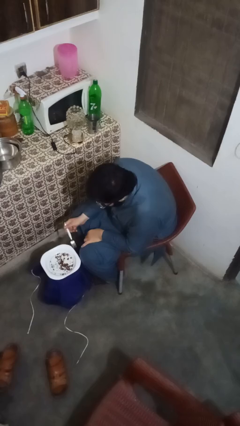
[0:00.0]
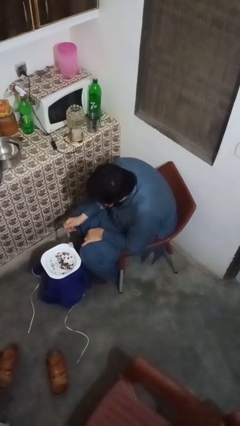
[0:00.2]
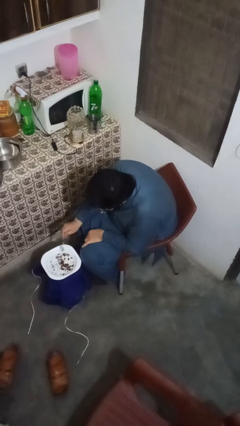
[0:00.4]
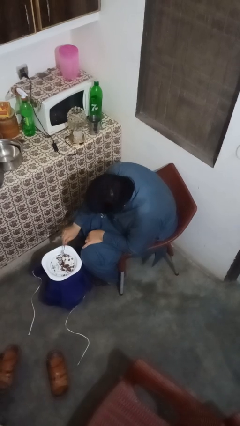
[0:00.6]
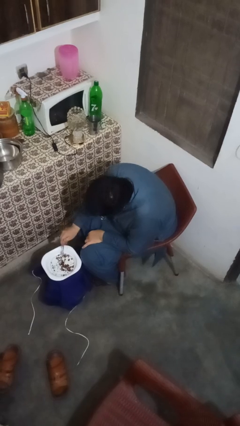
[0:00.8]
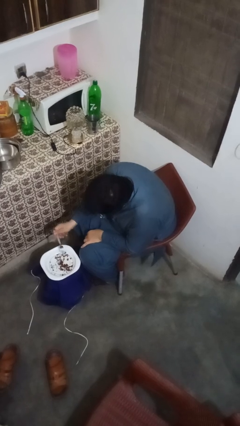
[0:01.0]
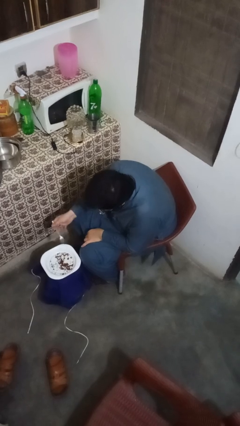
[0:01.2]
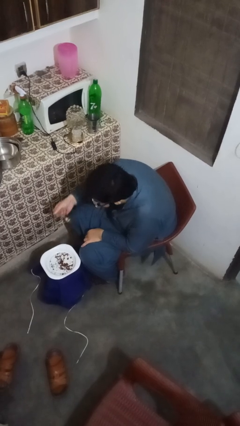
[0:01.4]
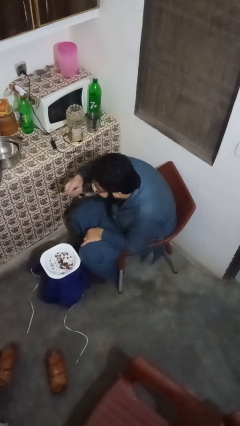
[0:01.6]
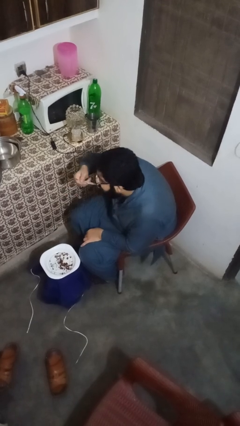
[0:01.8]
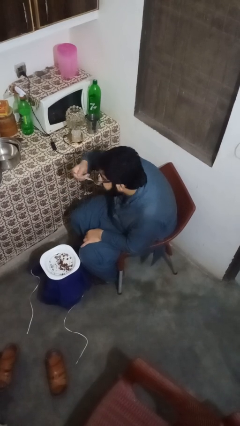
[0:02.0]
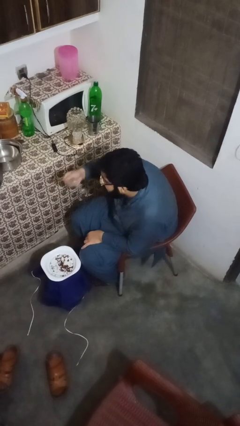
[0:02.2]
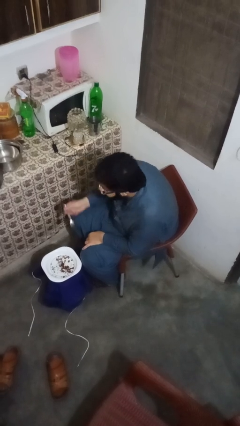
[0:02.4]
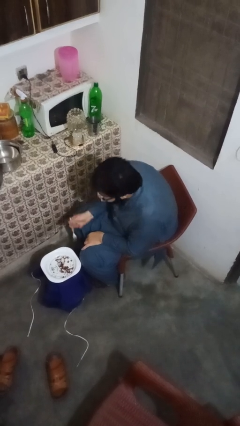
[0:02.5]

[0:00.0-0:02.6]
person eats with utensil

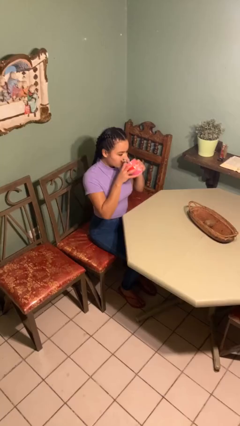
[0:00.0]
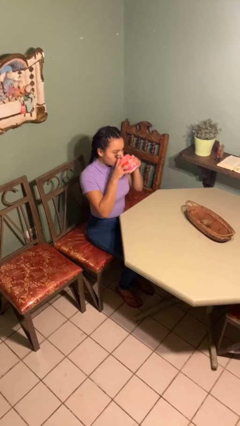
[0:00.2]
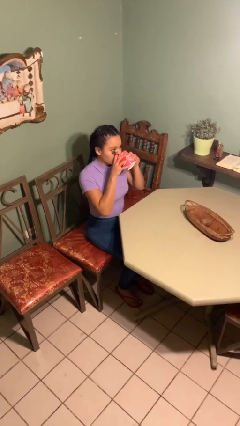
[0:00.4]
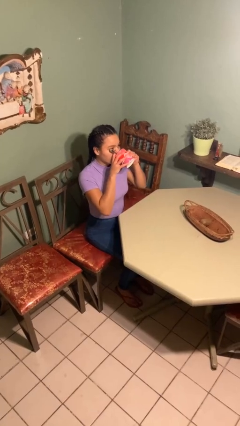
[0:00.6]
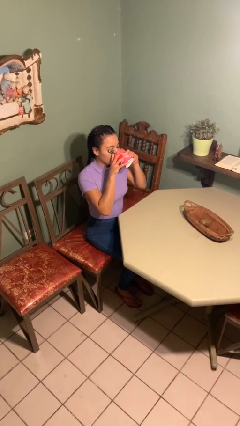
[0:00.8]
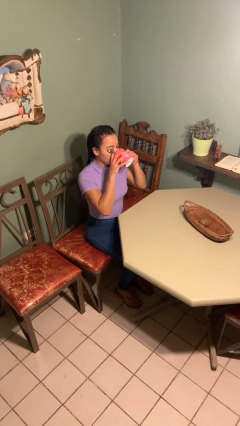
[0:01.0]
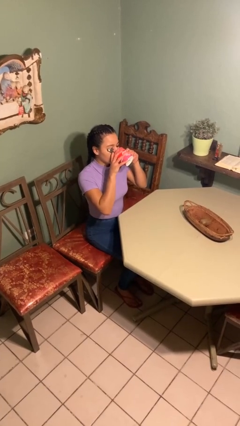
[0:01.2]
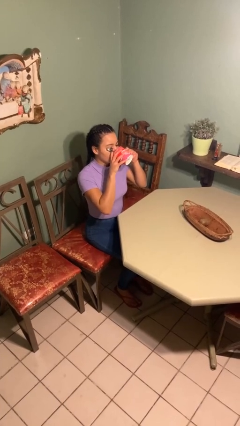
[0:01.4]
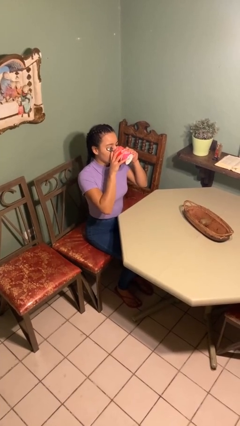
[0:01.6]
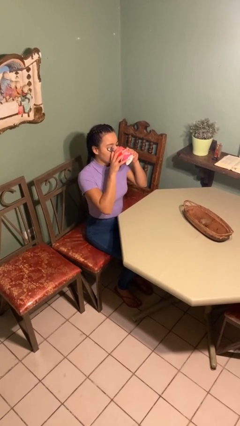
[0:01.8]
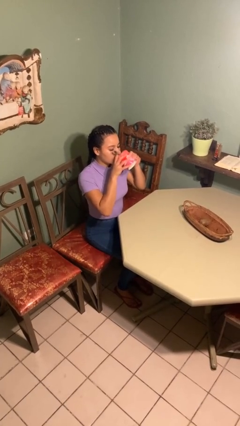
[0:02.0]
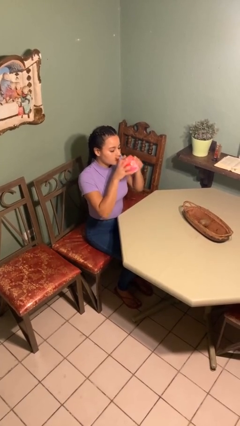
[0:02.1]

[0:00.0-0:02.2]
person drinks from mug

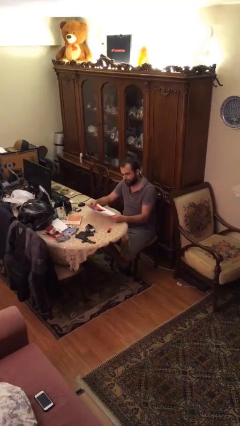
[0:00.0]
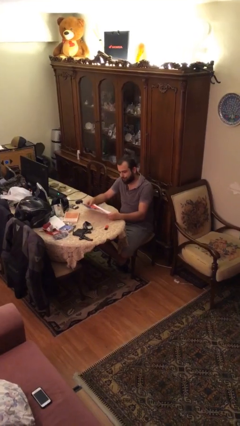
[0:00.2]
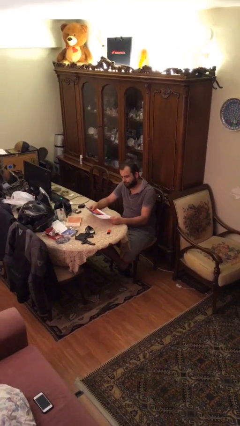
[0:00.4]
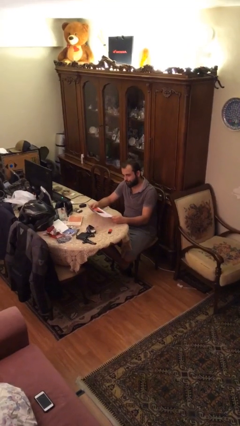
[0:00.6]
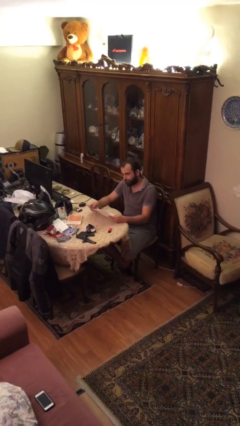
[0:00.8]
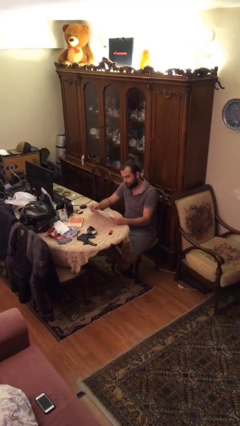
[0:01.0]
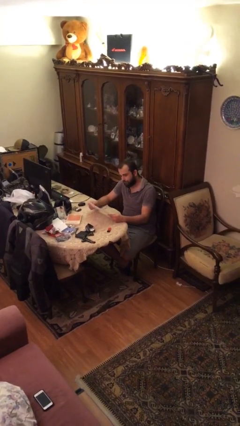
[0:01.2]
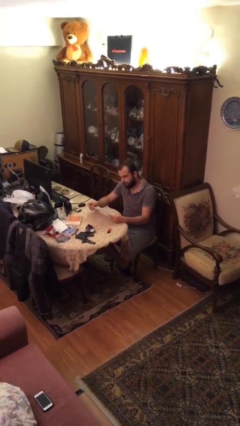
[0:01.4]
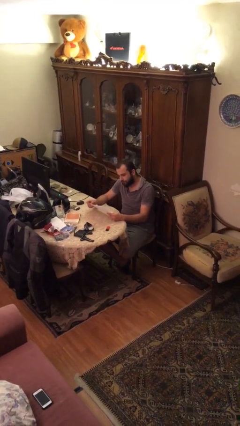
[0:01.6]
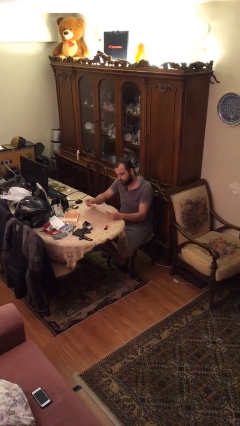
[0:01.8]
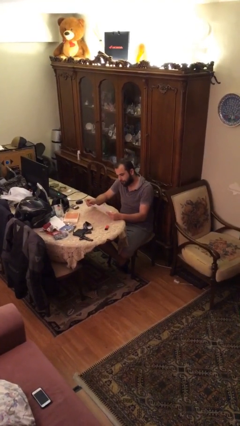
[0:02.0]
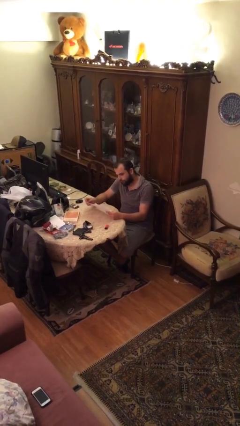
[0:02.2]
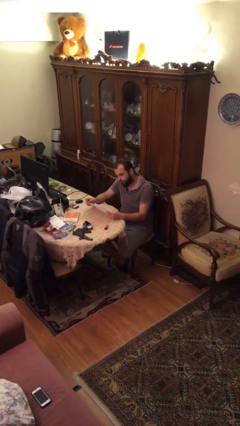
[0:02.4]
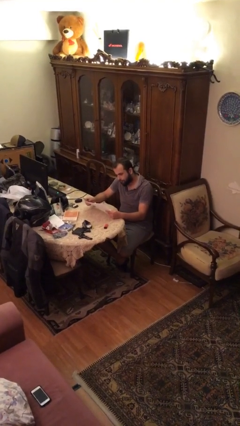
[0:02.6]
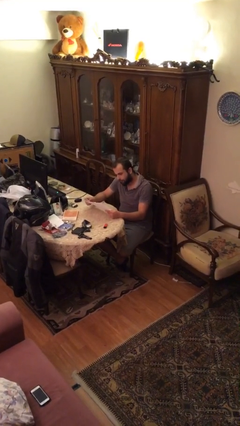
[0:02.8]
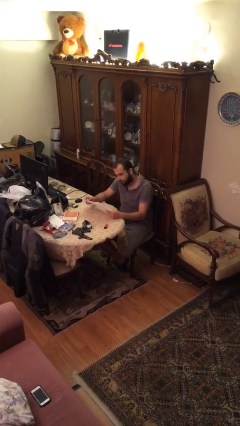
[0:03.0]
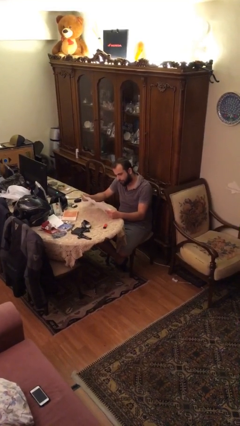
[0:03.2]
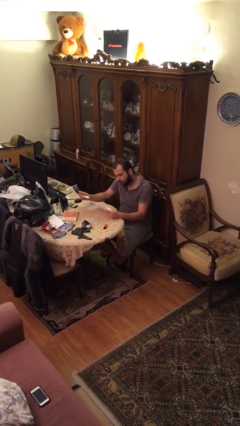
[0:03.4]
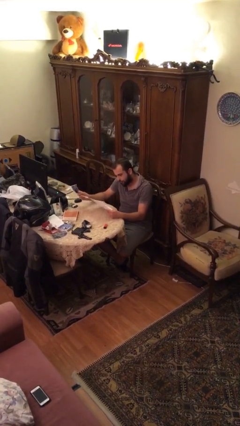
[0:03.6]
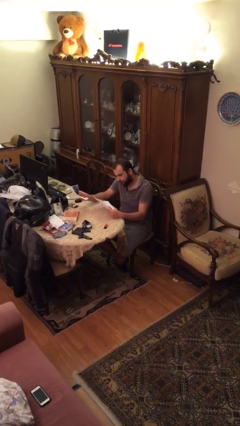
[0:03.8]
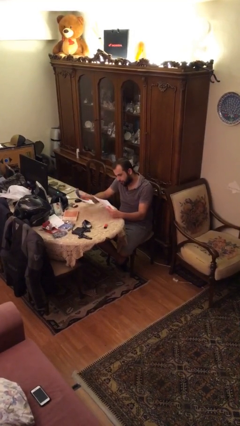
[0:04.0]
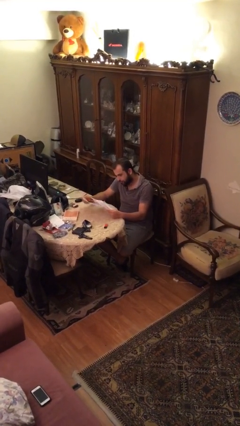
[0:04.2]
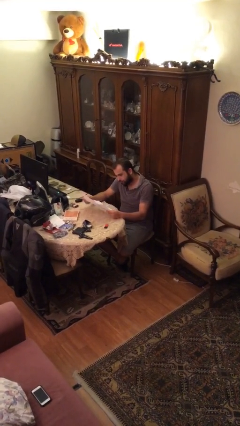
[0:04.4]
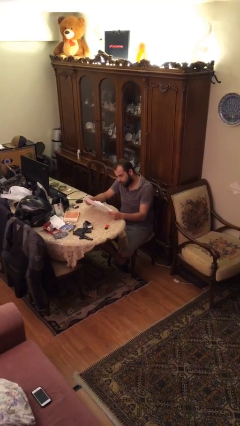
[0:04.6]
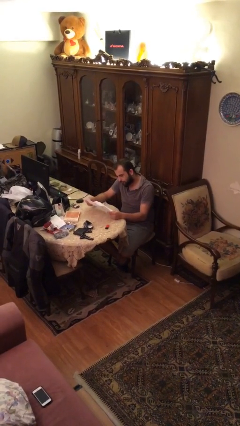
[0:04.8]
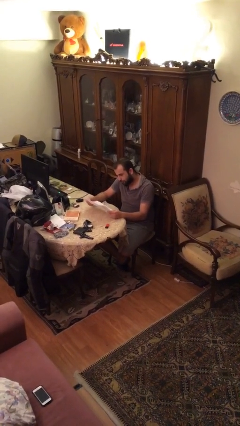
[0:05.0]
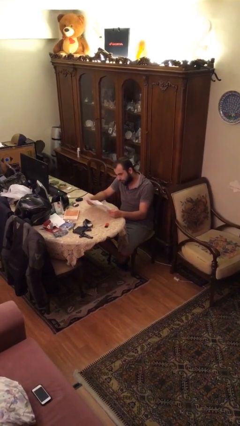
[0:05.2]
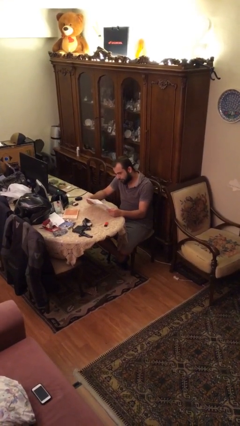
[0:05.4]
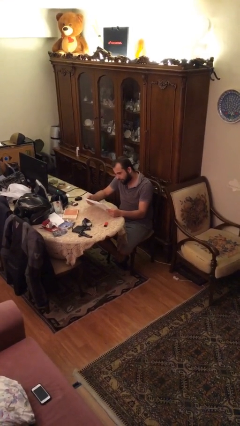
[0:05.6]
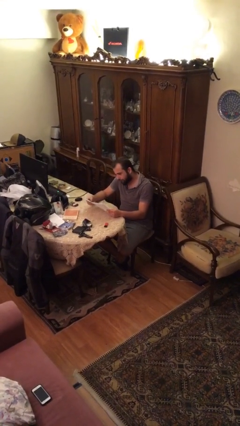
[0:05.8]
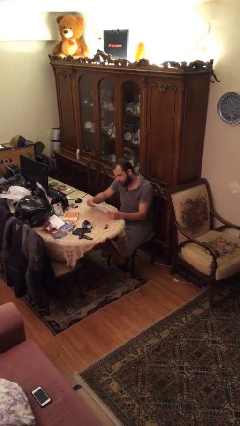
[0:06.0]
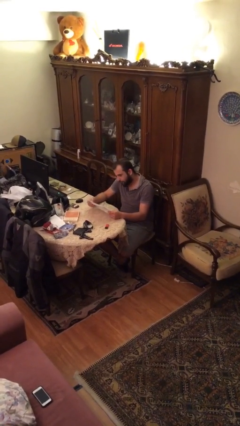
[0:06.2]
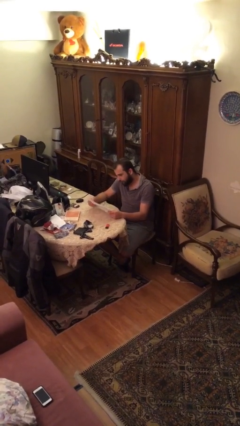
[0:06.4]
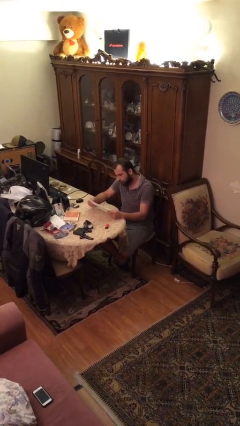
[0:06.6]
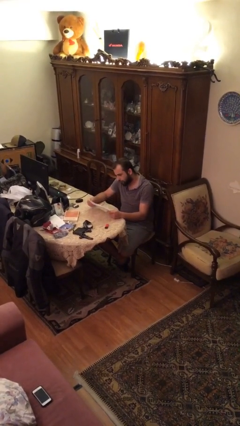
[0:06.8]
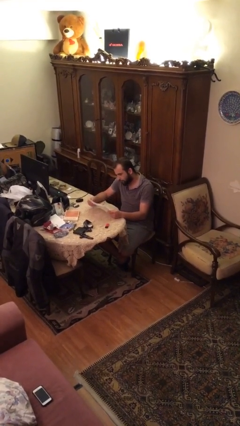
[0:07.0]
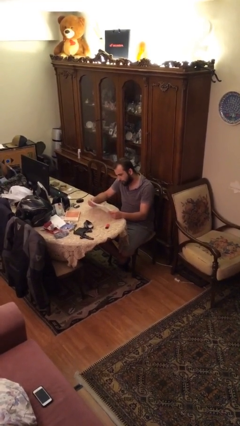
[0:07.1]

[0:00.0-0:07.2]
person reads document

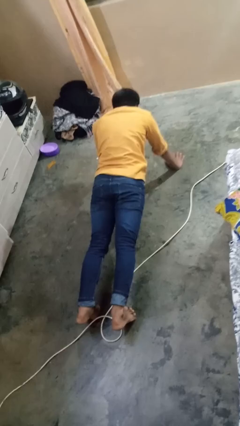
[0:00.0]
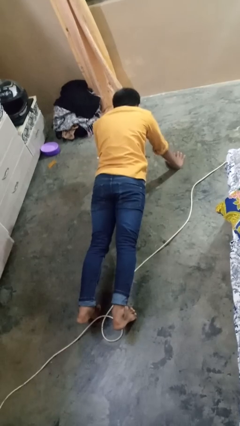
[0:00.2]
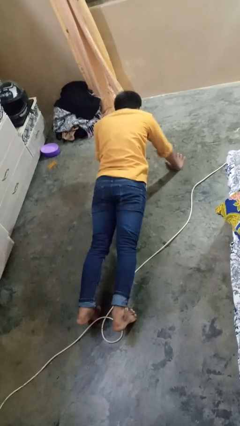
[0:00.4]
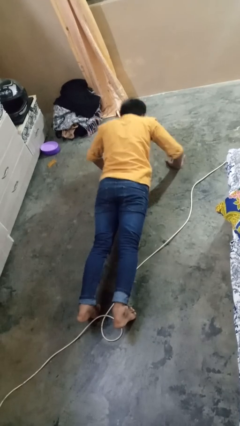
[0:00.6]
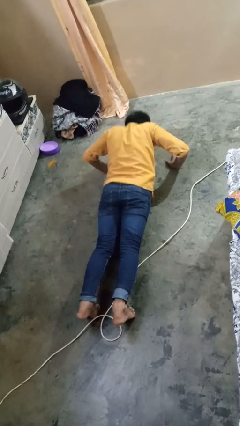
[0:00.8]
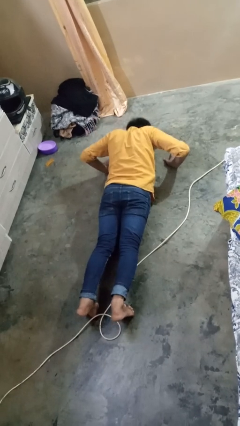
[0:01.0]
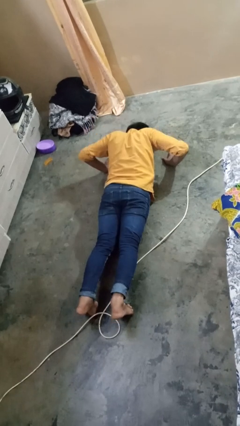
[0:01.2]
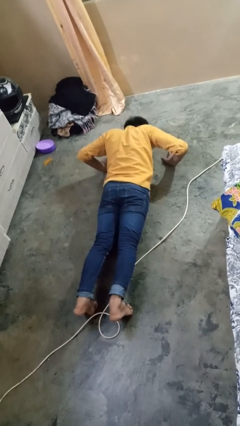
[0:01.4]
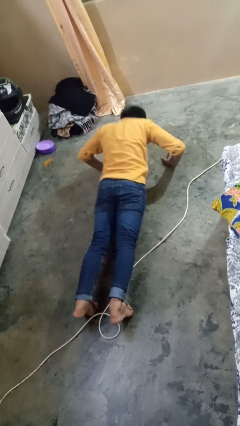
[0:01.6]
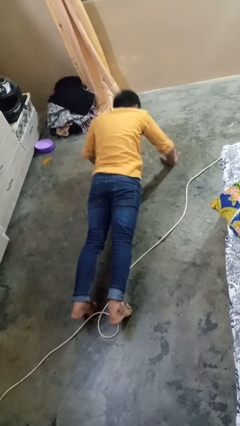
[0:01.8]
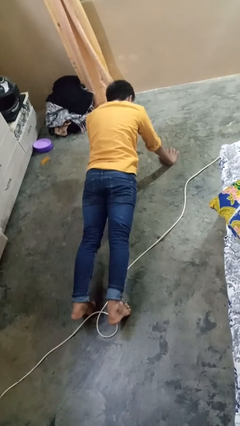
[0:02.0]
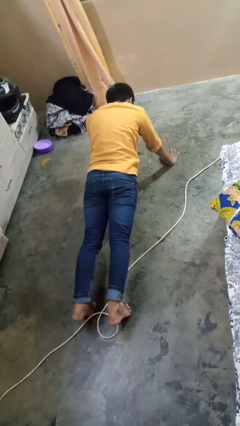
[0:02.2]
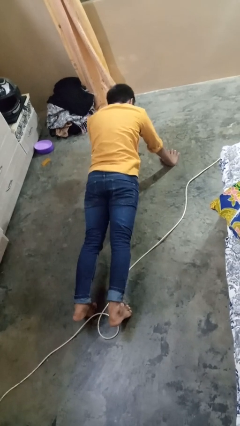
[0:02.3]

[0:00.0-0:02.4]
person exercises with pushup

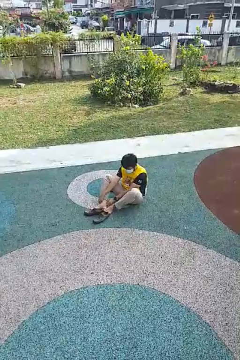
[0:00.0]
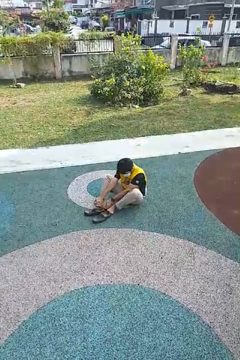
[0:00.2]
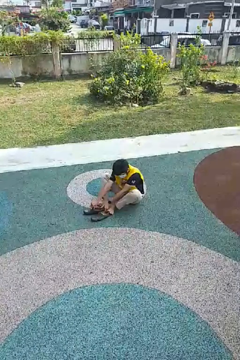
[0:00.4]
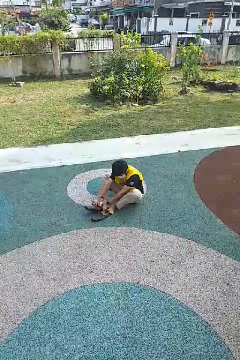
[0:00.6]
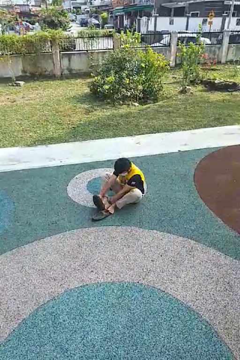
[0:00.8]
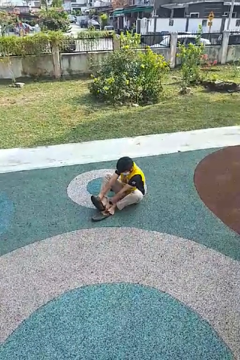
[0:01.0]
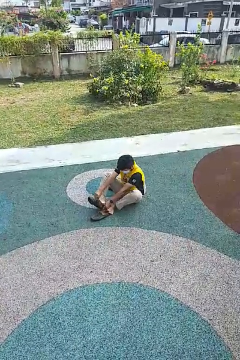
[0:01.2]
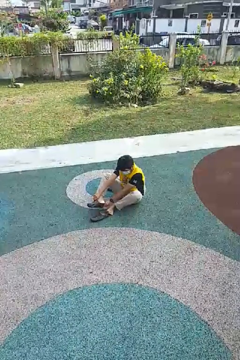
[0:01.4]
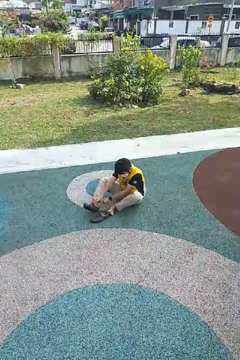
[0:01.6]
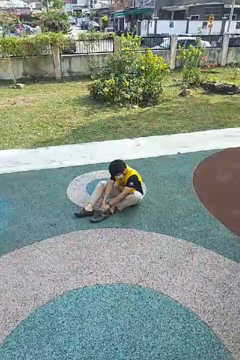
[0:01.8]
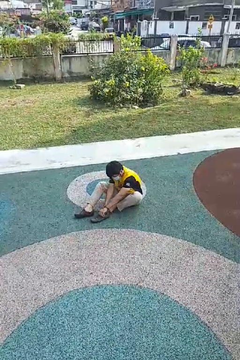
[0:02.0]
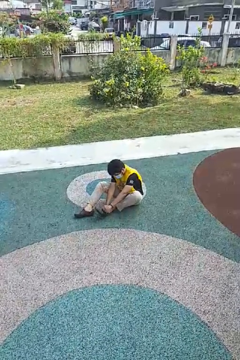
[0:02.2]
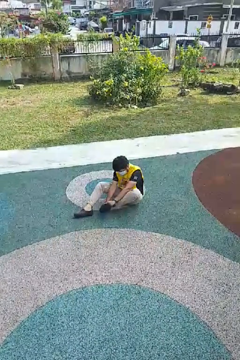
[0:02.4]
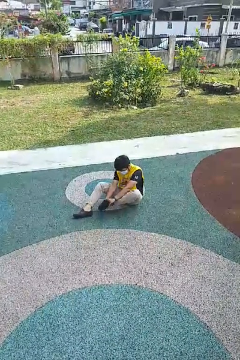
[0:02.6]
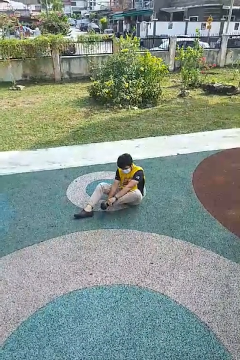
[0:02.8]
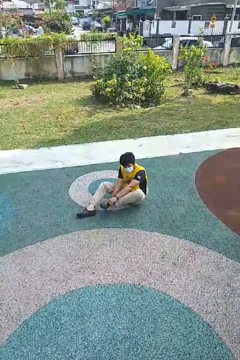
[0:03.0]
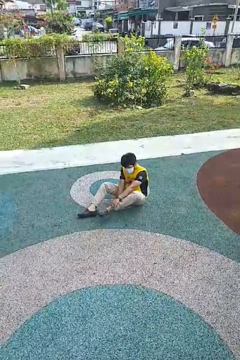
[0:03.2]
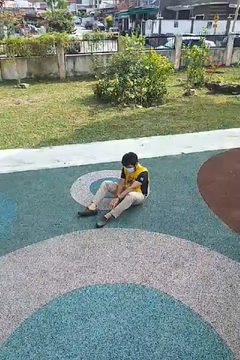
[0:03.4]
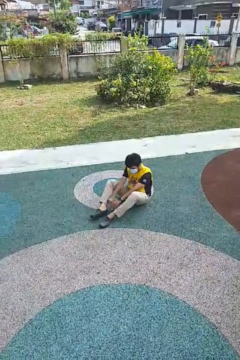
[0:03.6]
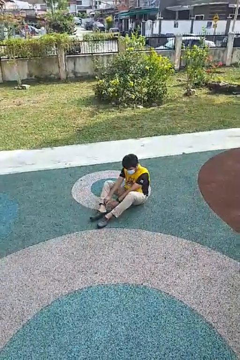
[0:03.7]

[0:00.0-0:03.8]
person puts on shoes
